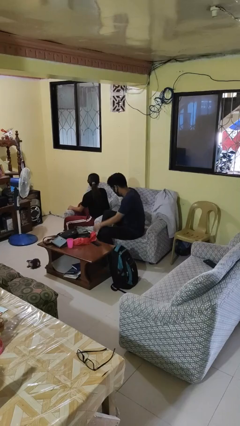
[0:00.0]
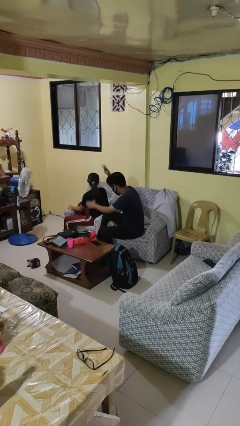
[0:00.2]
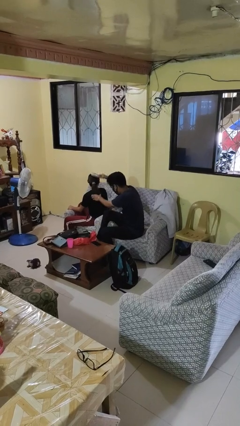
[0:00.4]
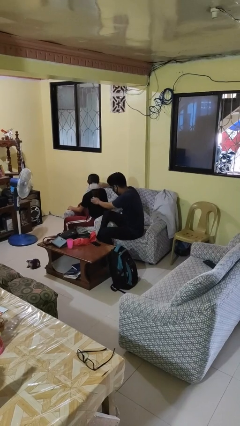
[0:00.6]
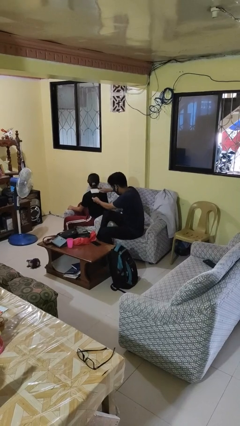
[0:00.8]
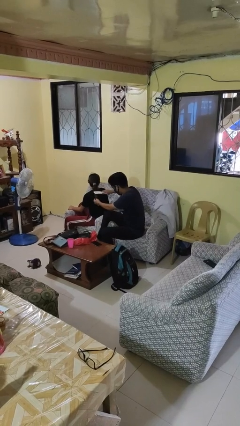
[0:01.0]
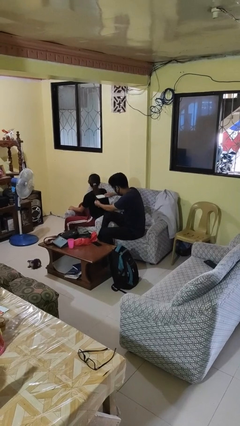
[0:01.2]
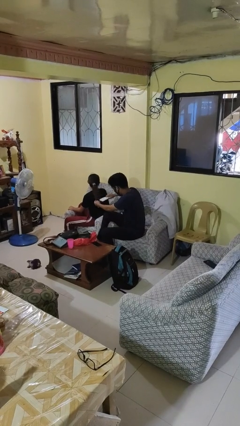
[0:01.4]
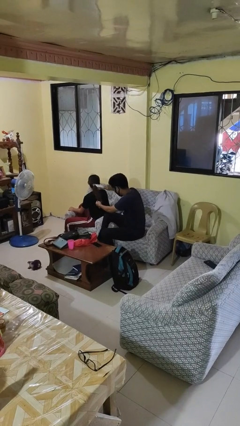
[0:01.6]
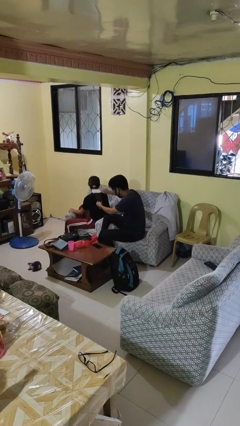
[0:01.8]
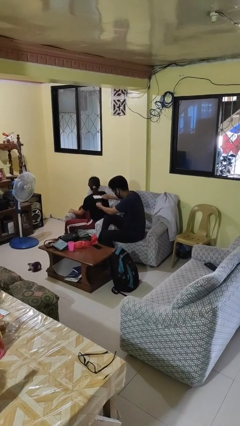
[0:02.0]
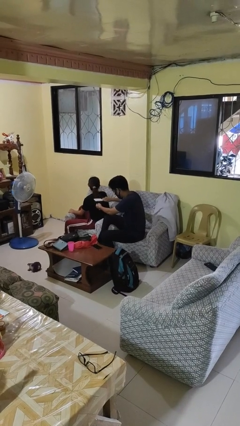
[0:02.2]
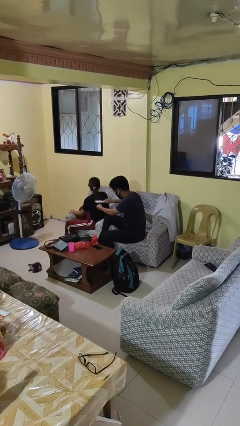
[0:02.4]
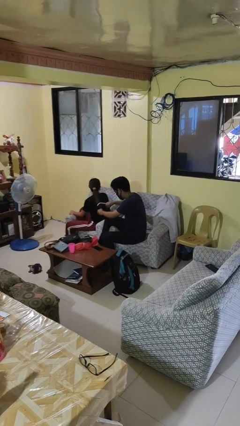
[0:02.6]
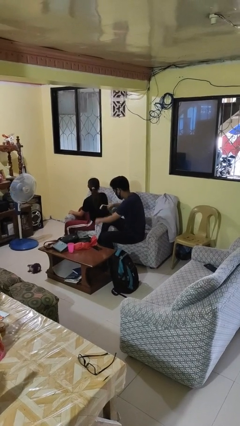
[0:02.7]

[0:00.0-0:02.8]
person brushes hair of person

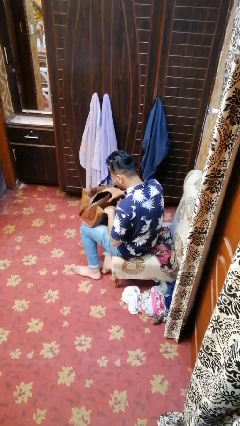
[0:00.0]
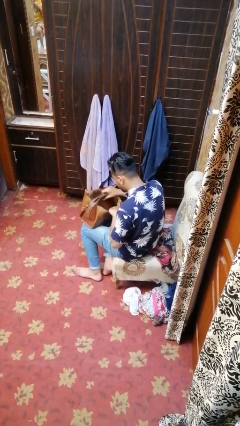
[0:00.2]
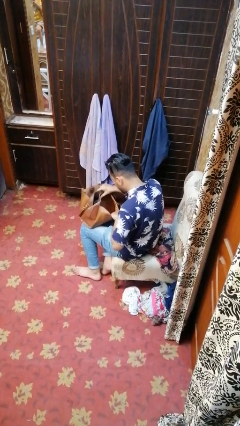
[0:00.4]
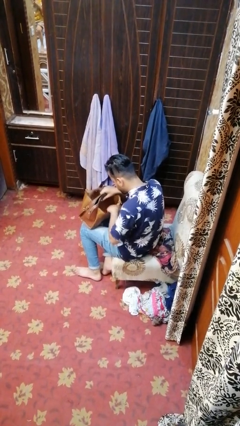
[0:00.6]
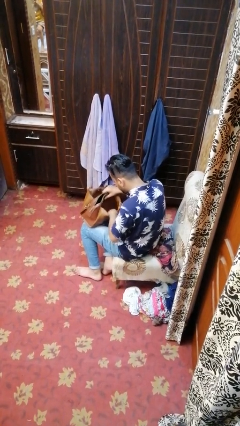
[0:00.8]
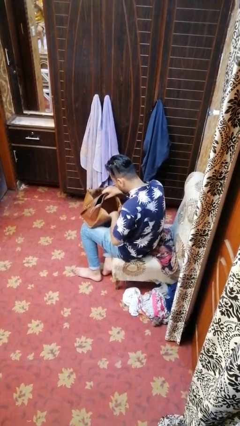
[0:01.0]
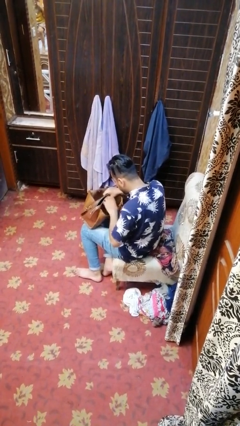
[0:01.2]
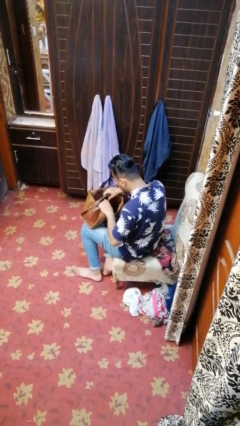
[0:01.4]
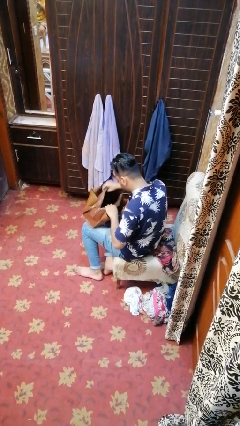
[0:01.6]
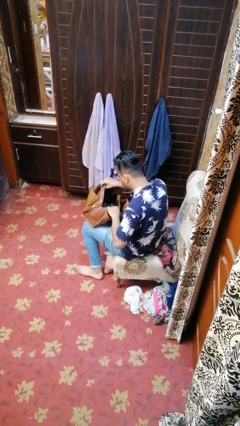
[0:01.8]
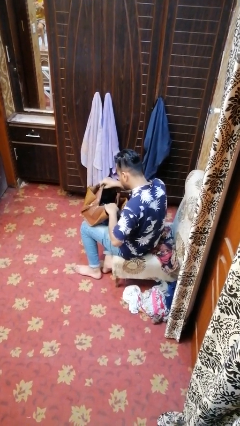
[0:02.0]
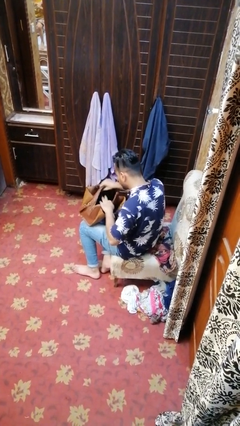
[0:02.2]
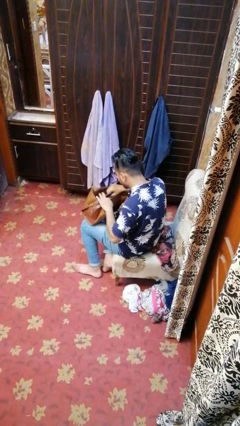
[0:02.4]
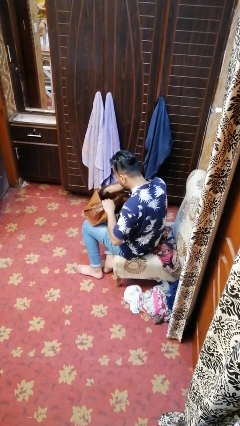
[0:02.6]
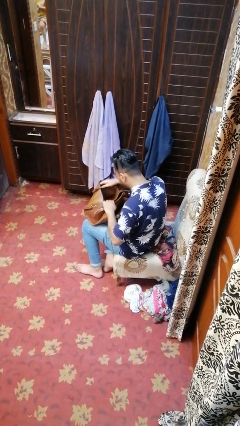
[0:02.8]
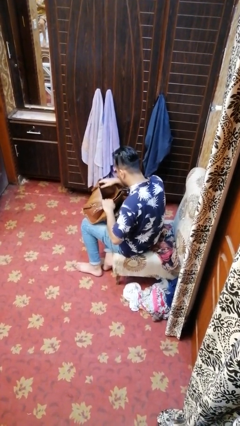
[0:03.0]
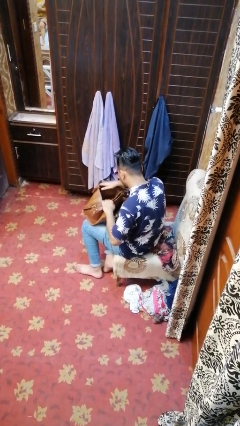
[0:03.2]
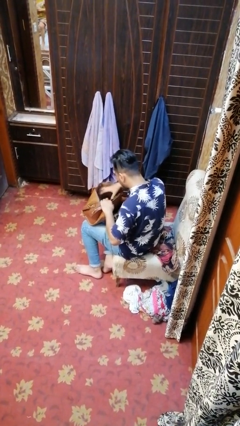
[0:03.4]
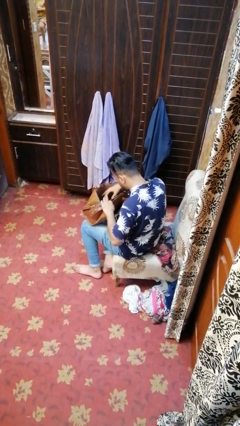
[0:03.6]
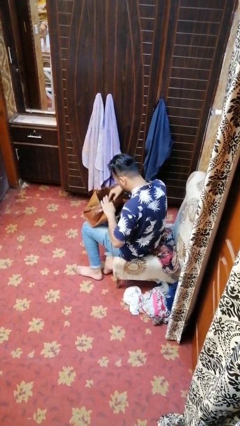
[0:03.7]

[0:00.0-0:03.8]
person searches in purse

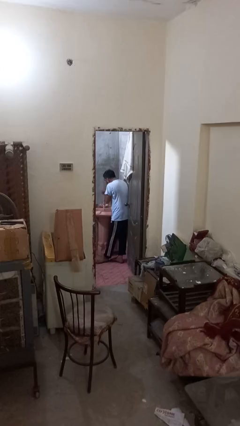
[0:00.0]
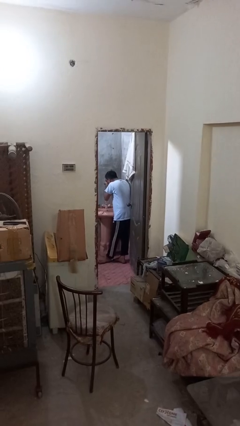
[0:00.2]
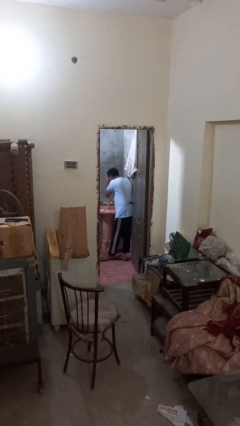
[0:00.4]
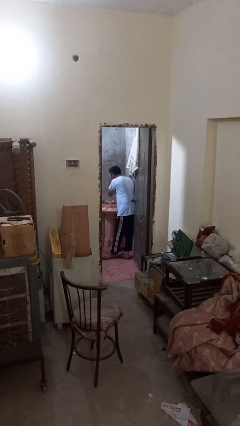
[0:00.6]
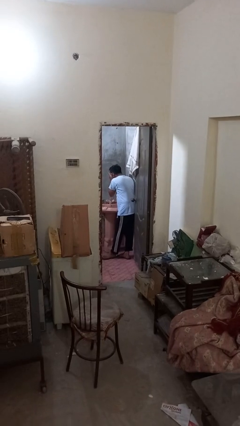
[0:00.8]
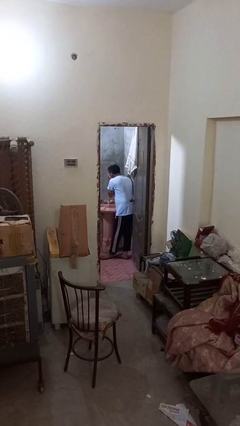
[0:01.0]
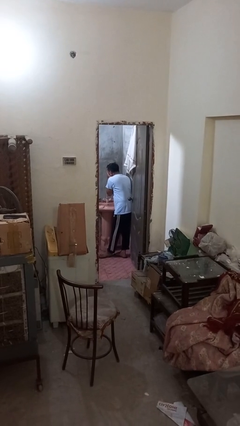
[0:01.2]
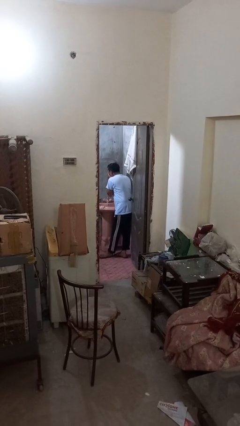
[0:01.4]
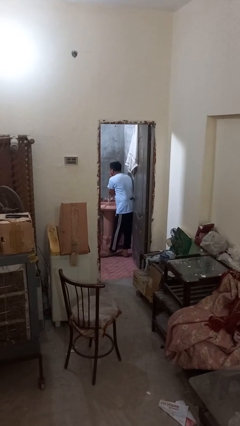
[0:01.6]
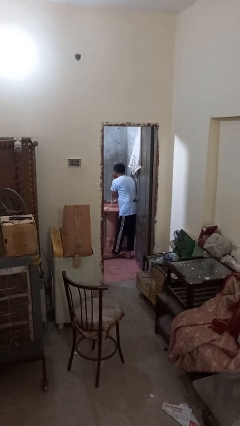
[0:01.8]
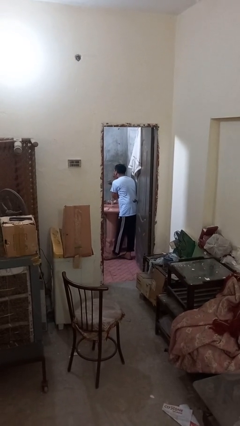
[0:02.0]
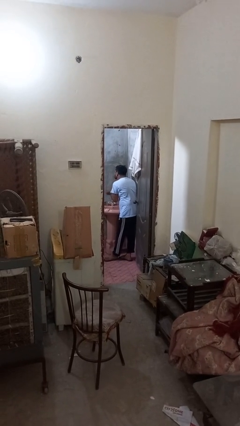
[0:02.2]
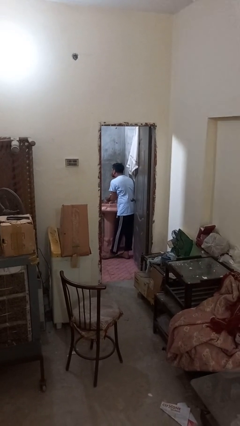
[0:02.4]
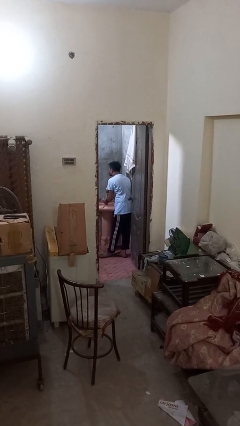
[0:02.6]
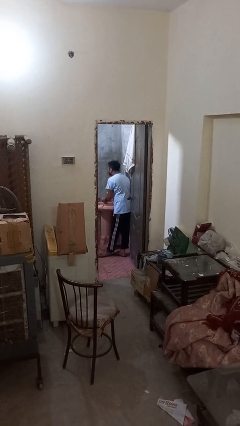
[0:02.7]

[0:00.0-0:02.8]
person washes face

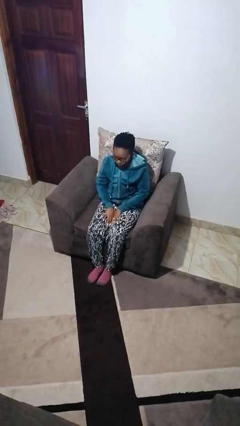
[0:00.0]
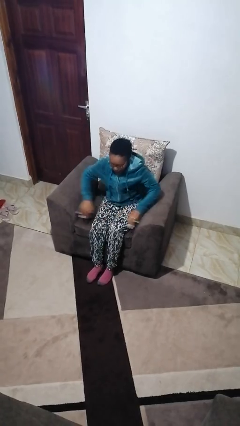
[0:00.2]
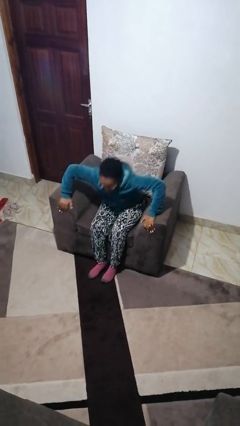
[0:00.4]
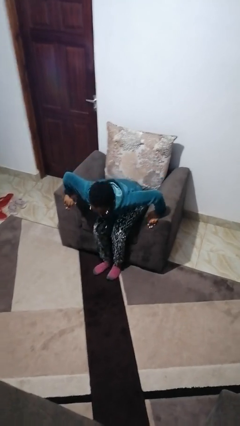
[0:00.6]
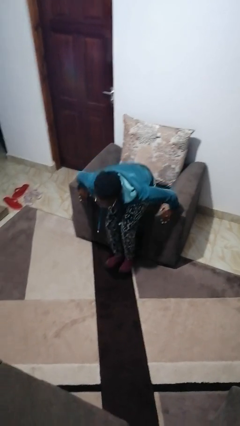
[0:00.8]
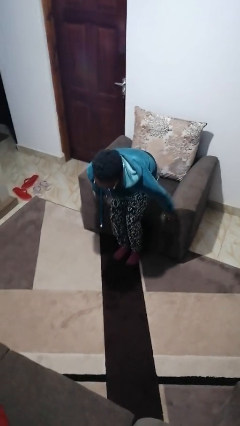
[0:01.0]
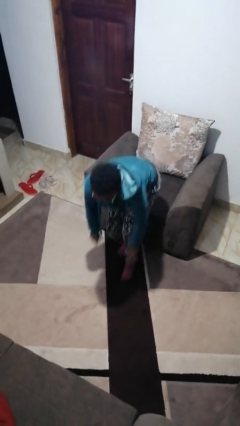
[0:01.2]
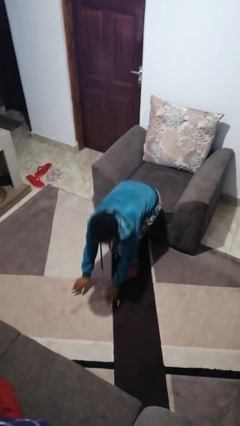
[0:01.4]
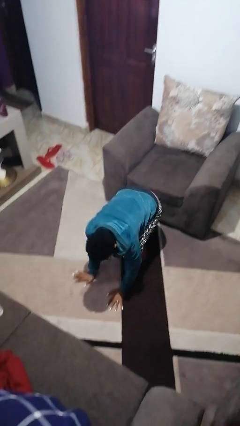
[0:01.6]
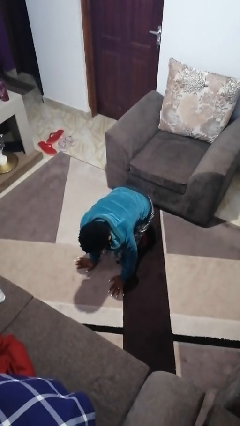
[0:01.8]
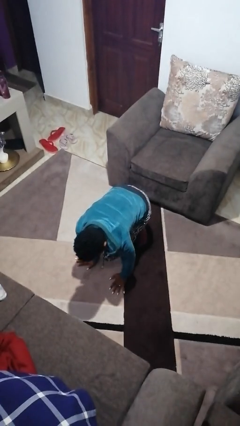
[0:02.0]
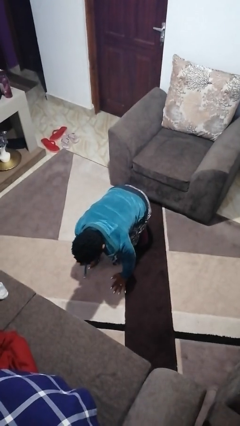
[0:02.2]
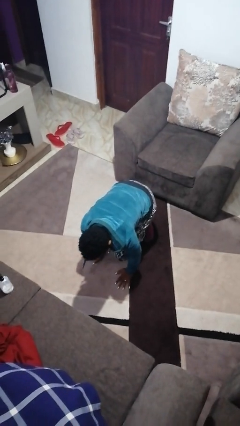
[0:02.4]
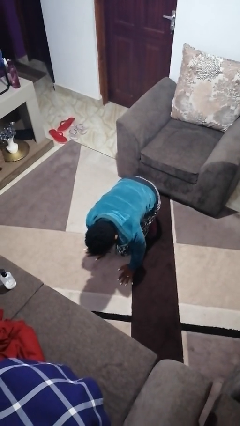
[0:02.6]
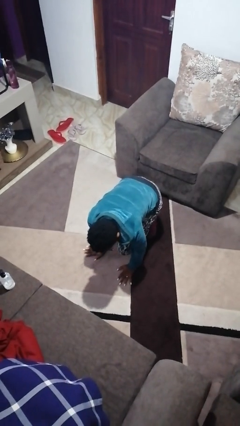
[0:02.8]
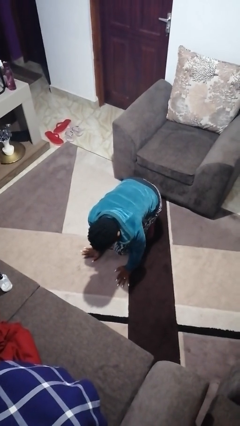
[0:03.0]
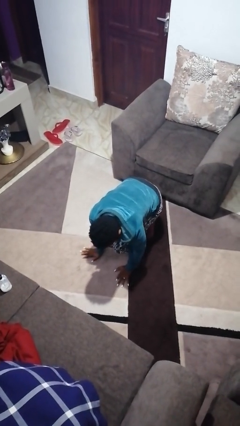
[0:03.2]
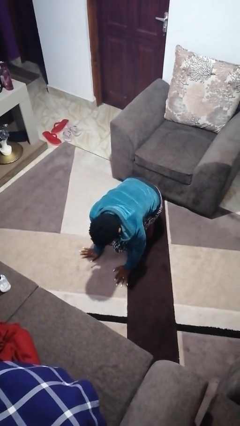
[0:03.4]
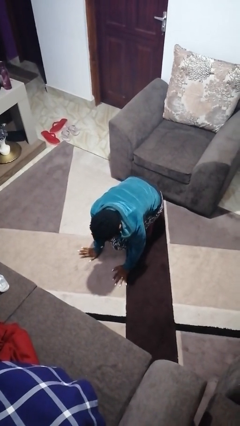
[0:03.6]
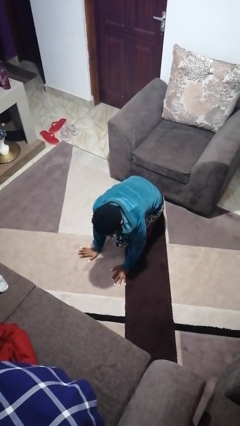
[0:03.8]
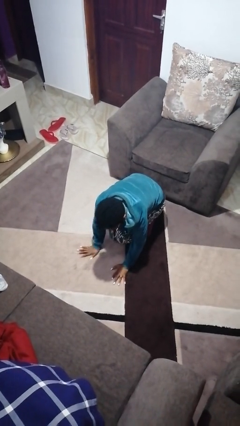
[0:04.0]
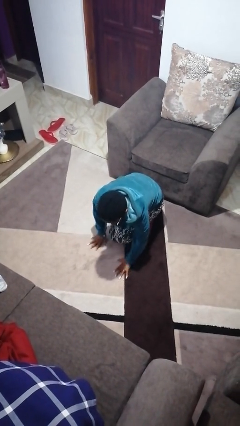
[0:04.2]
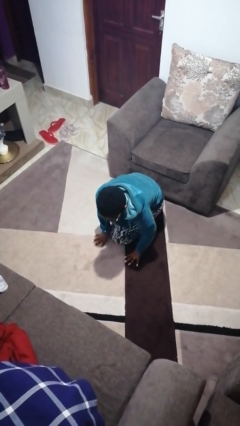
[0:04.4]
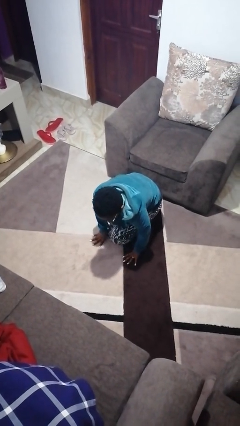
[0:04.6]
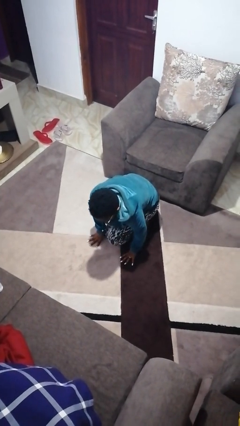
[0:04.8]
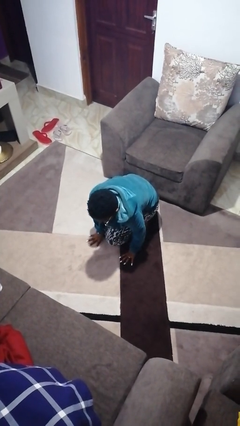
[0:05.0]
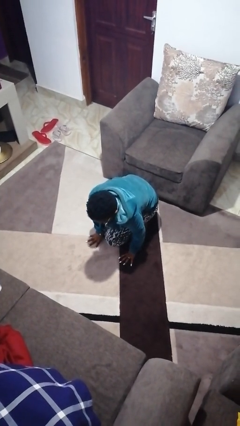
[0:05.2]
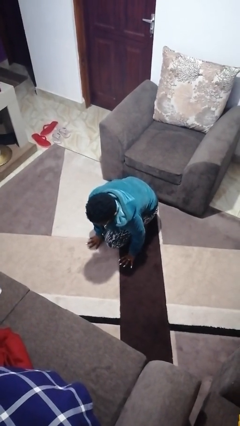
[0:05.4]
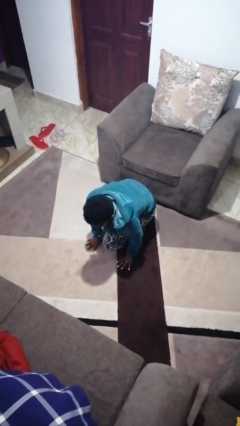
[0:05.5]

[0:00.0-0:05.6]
person falls from chair

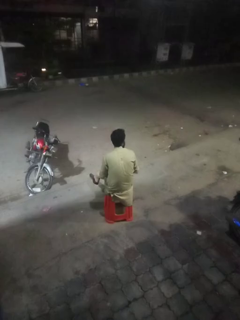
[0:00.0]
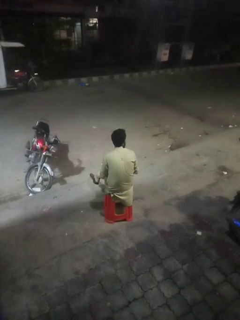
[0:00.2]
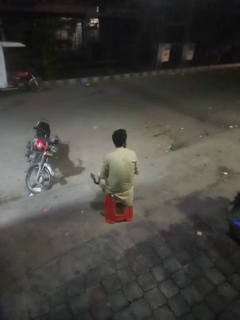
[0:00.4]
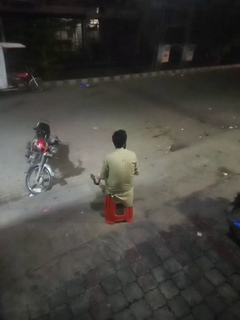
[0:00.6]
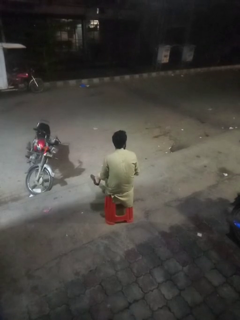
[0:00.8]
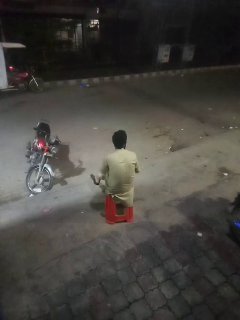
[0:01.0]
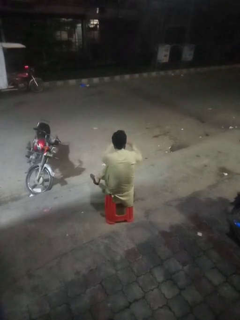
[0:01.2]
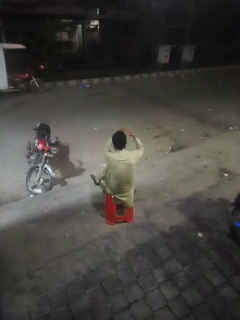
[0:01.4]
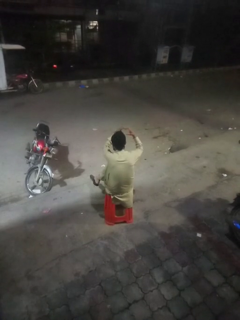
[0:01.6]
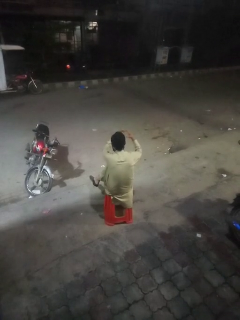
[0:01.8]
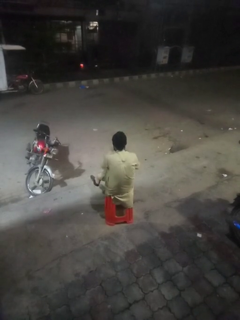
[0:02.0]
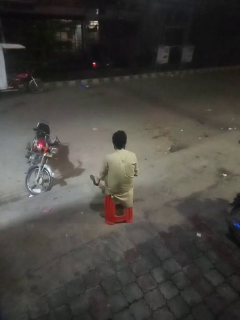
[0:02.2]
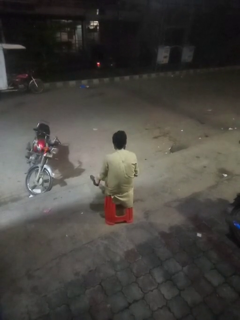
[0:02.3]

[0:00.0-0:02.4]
person gestures heart

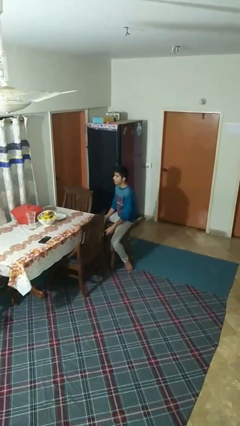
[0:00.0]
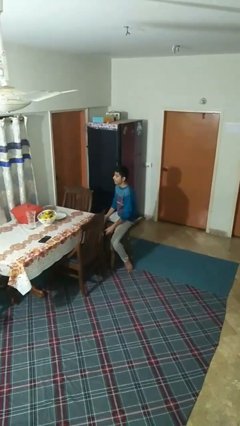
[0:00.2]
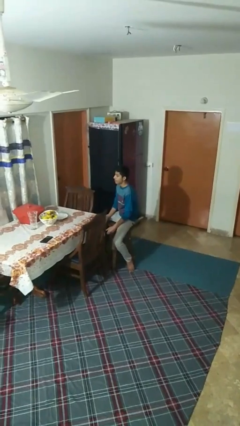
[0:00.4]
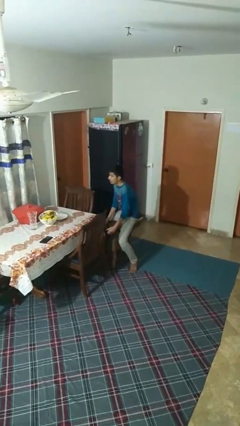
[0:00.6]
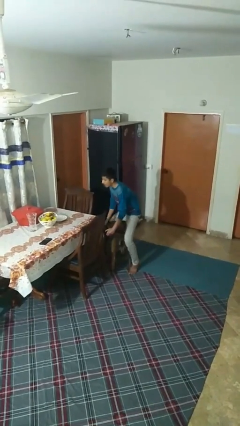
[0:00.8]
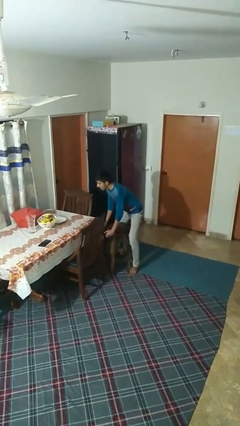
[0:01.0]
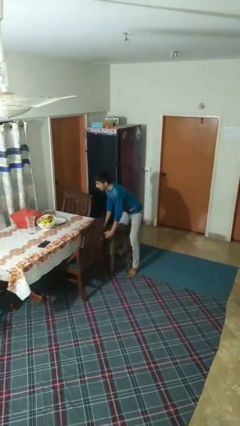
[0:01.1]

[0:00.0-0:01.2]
person stands up
